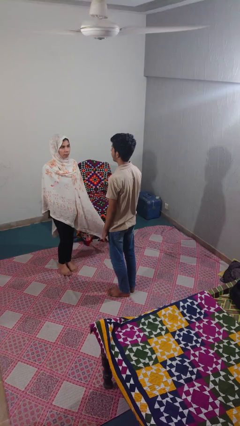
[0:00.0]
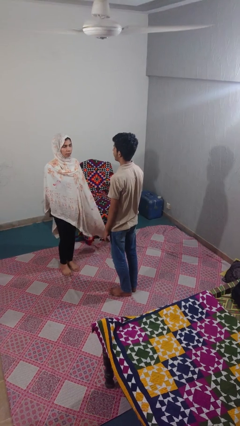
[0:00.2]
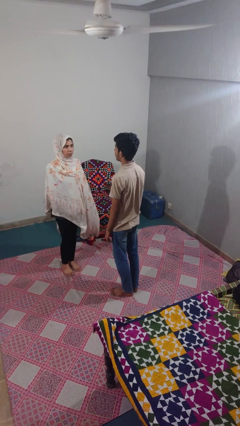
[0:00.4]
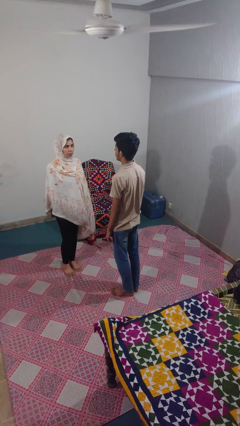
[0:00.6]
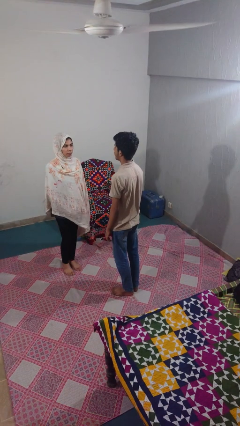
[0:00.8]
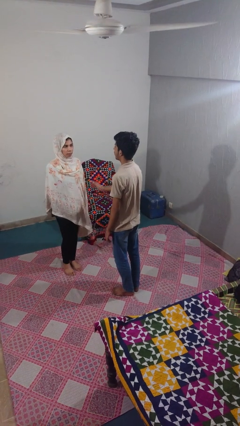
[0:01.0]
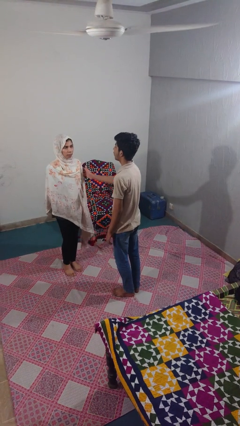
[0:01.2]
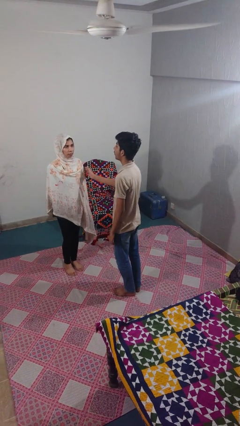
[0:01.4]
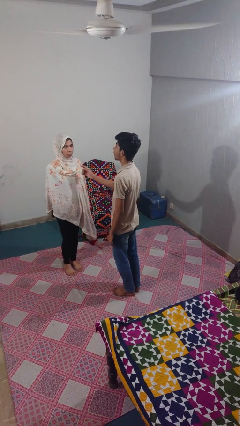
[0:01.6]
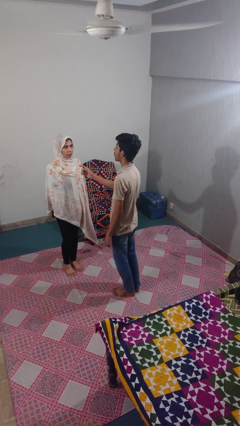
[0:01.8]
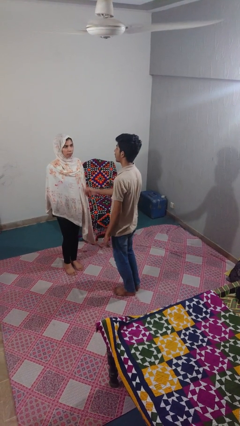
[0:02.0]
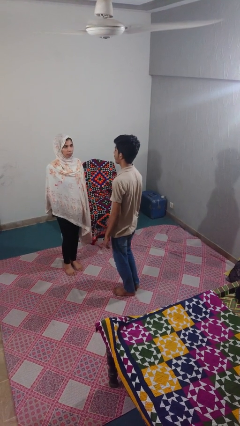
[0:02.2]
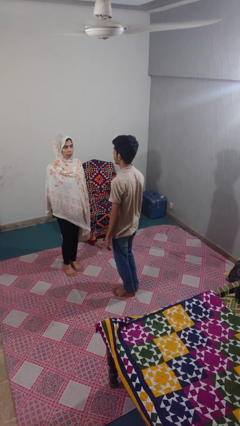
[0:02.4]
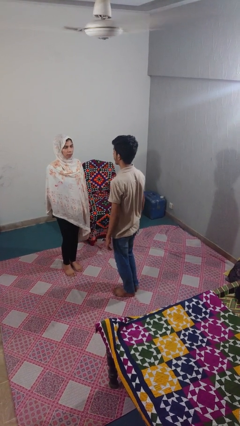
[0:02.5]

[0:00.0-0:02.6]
person shoves person

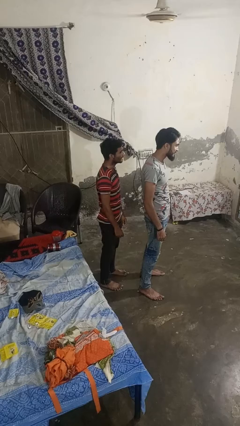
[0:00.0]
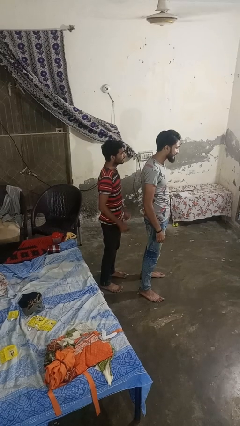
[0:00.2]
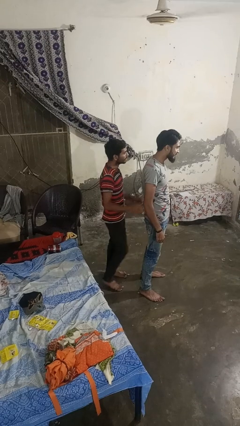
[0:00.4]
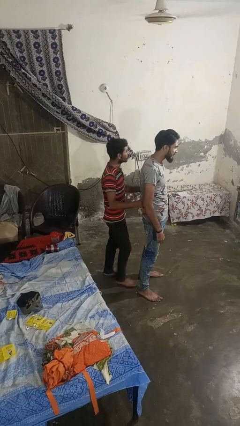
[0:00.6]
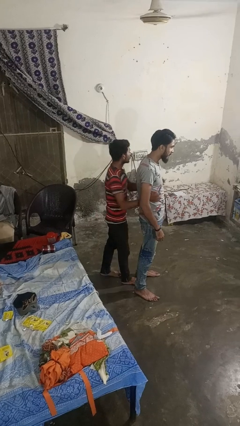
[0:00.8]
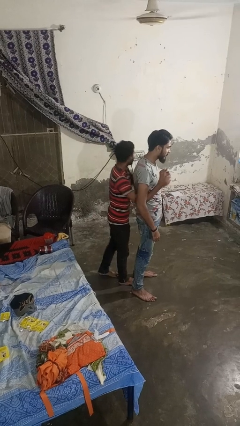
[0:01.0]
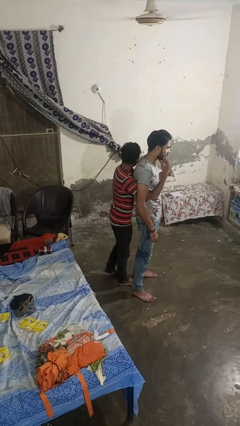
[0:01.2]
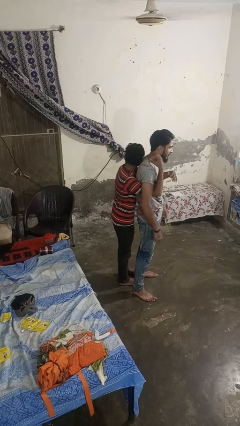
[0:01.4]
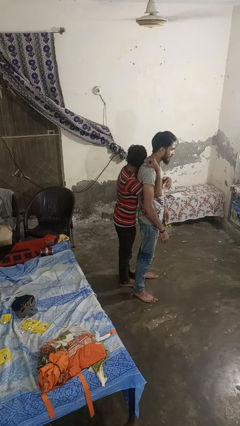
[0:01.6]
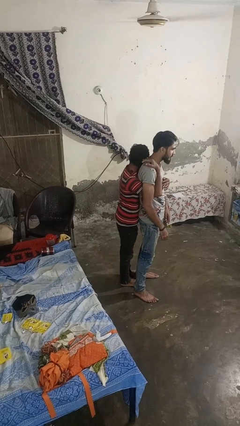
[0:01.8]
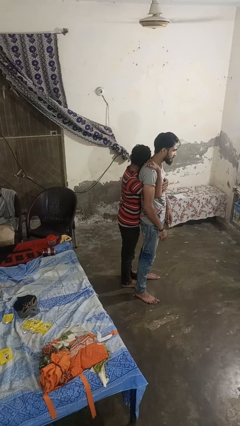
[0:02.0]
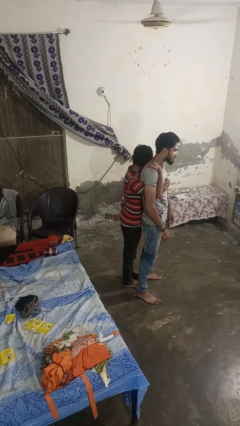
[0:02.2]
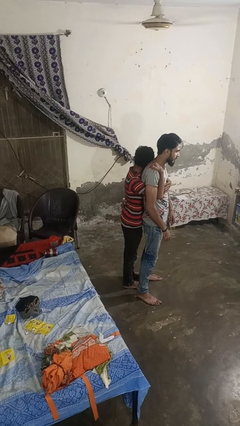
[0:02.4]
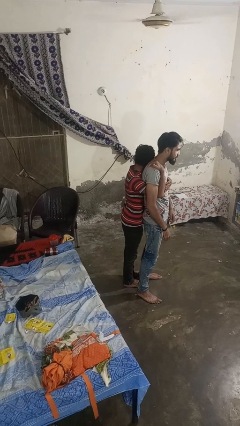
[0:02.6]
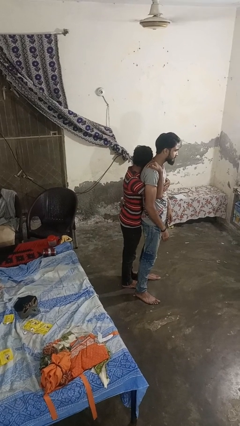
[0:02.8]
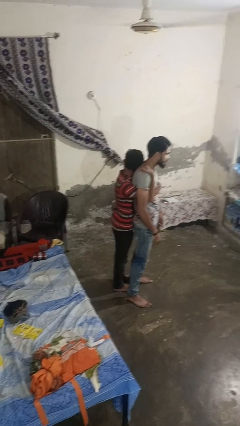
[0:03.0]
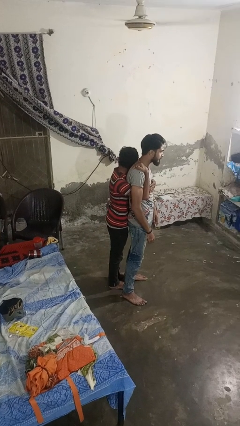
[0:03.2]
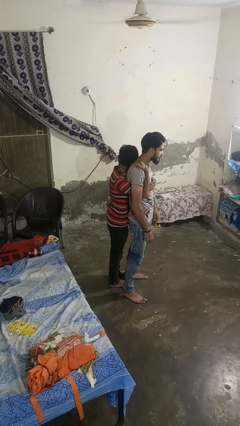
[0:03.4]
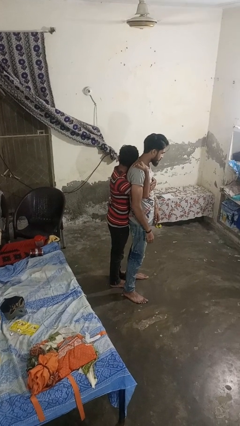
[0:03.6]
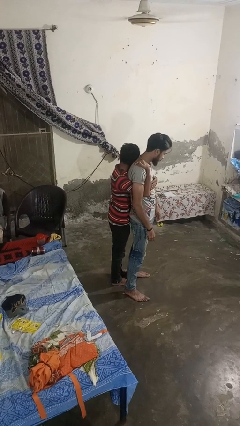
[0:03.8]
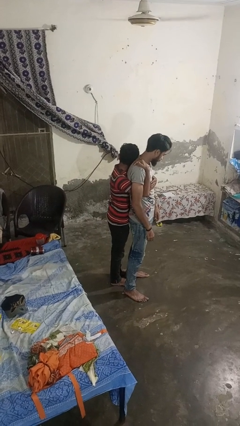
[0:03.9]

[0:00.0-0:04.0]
person hugs person from behind

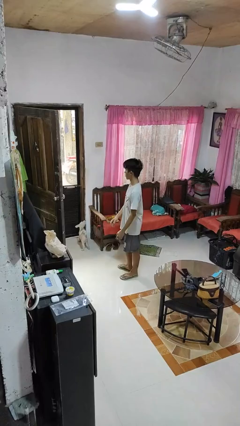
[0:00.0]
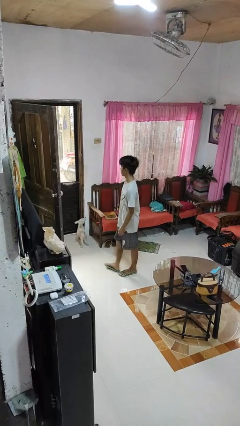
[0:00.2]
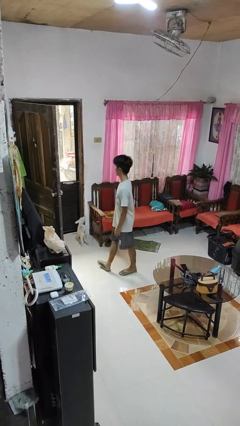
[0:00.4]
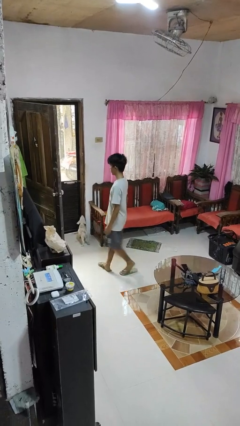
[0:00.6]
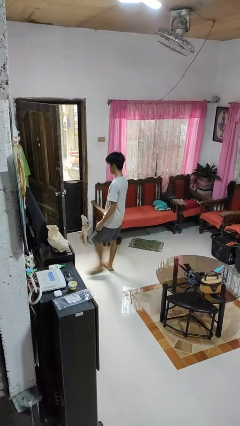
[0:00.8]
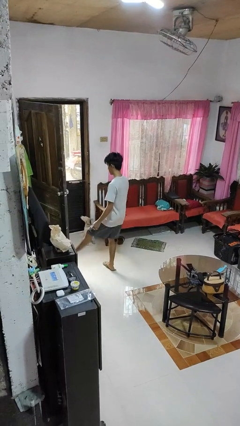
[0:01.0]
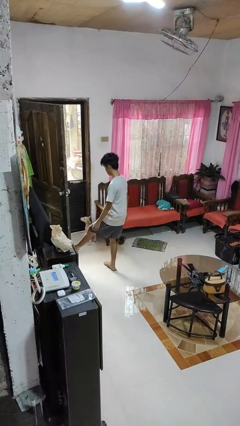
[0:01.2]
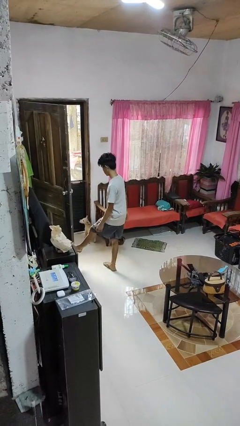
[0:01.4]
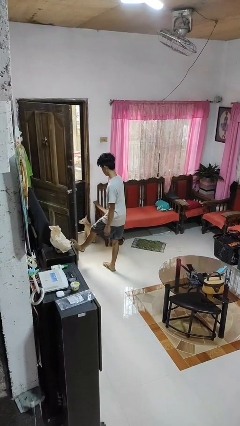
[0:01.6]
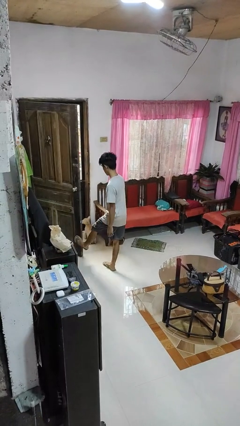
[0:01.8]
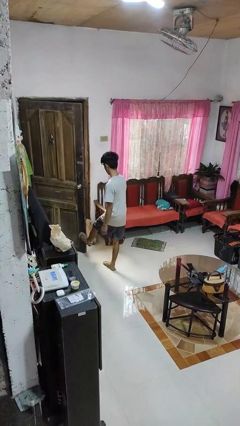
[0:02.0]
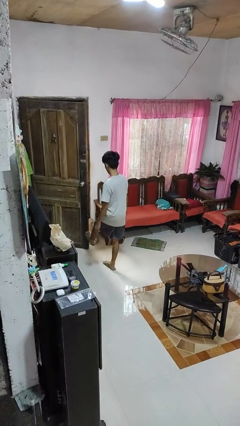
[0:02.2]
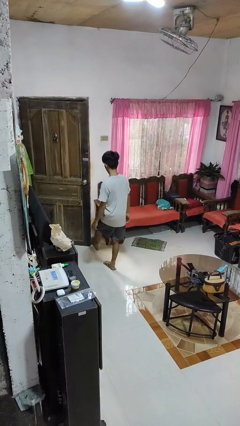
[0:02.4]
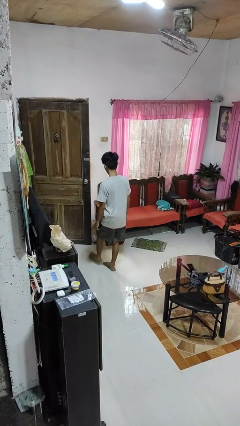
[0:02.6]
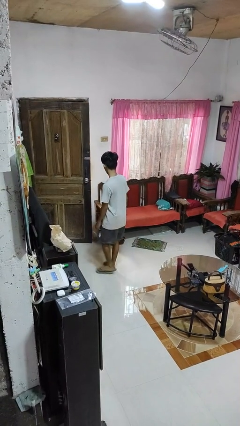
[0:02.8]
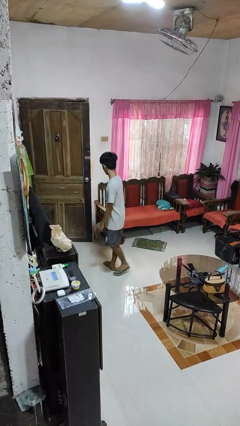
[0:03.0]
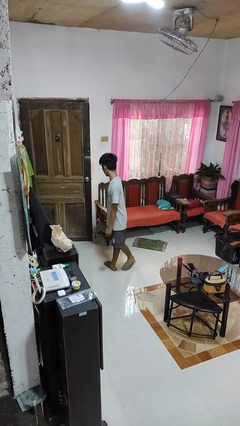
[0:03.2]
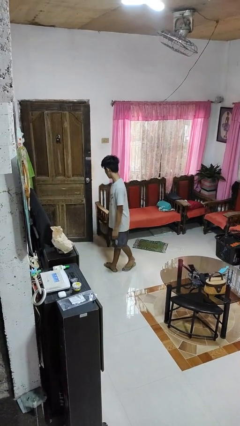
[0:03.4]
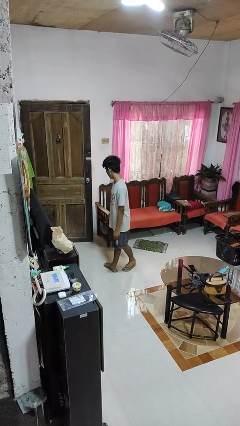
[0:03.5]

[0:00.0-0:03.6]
person closes door with foot

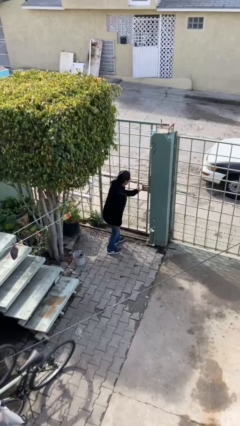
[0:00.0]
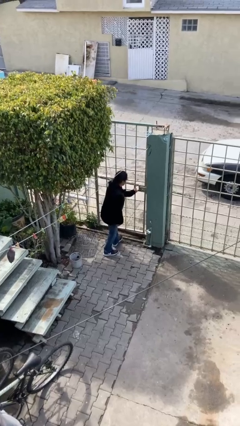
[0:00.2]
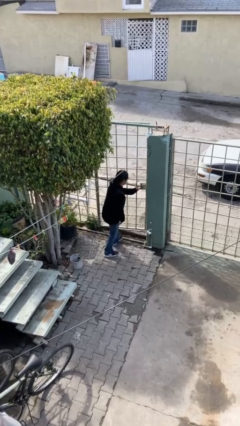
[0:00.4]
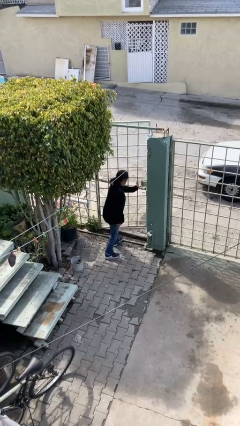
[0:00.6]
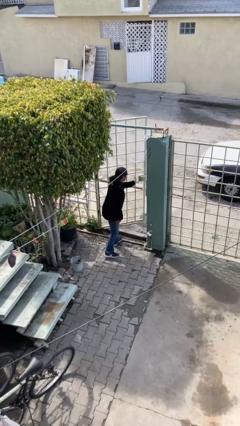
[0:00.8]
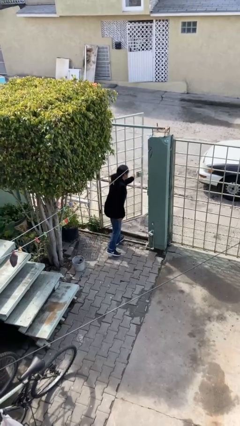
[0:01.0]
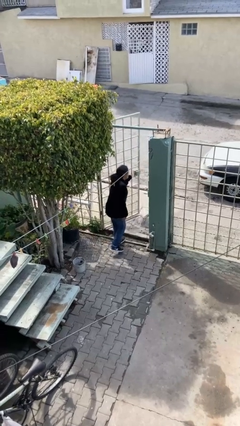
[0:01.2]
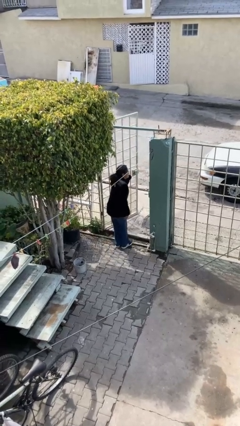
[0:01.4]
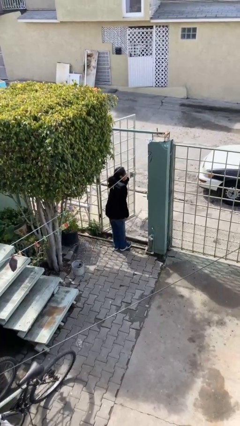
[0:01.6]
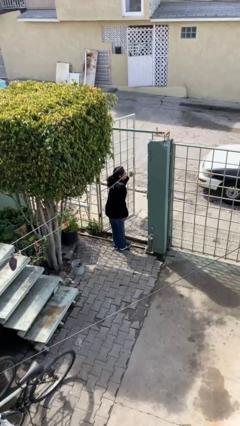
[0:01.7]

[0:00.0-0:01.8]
person opens facility door

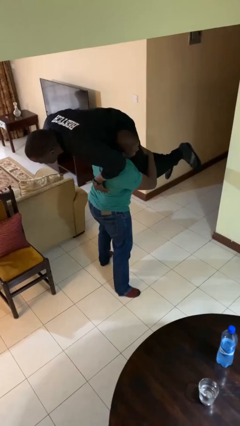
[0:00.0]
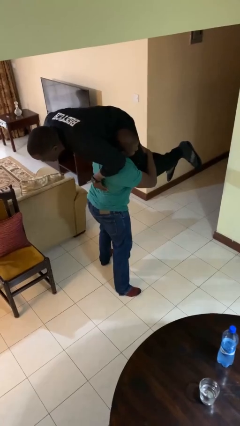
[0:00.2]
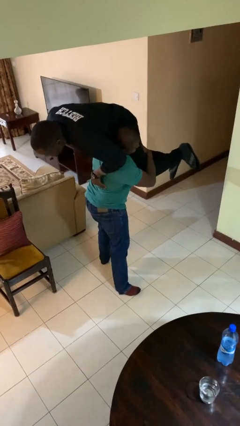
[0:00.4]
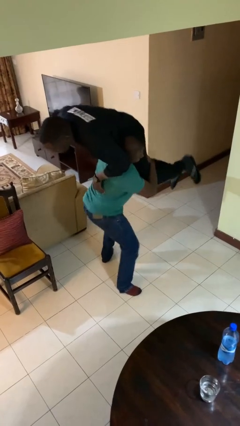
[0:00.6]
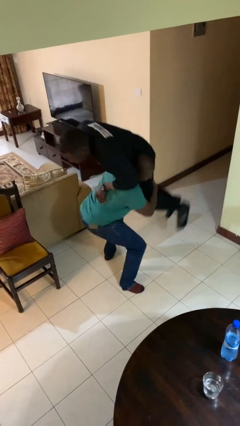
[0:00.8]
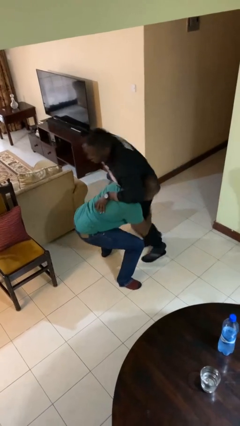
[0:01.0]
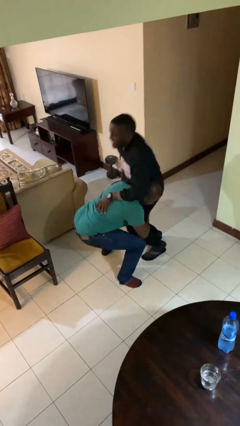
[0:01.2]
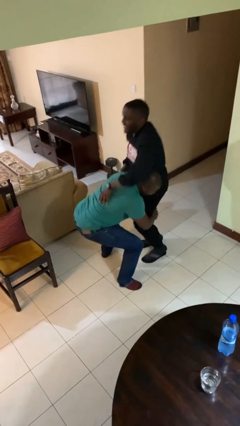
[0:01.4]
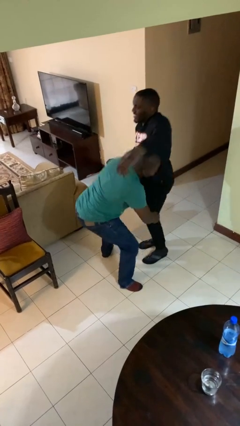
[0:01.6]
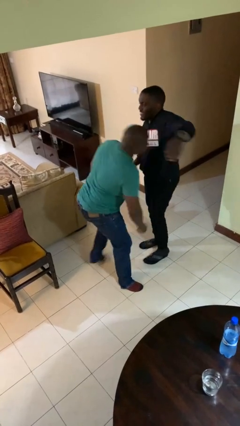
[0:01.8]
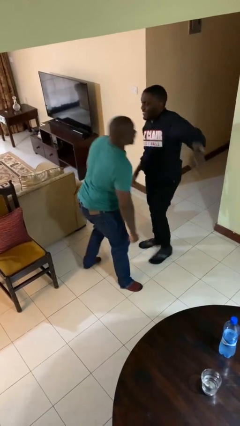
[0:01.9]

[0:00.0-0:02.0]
person puts down person

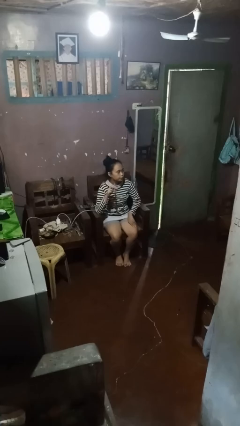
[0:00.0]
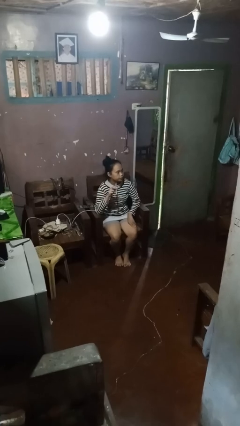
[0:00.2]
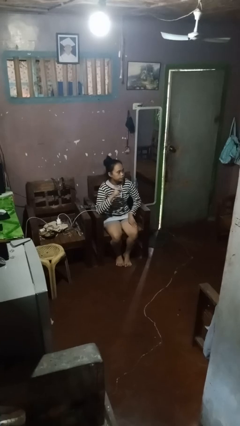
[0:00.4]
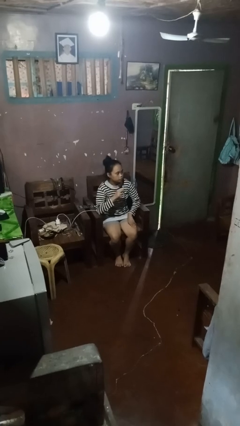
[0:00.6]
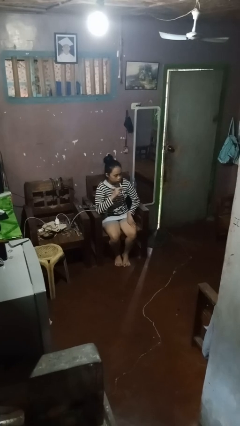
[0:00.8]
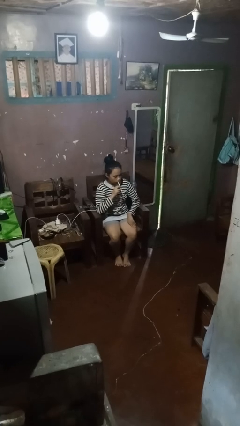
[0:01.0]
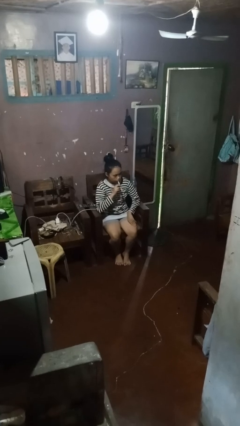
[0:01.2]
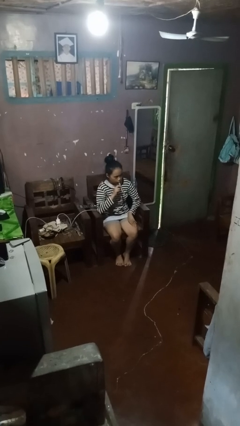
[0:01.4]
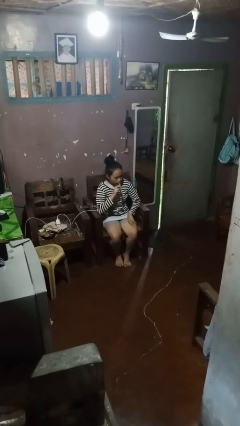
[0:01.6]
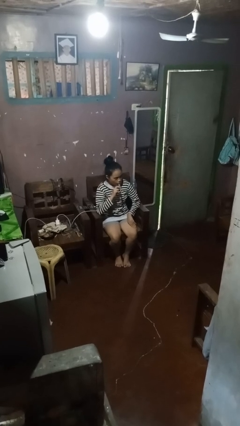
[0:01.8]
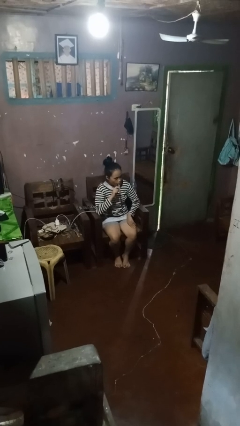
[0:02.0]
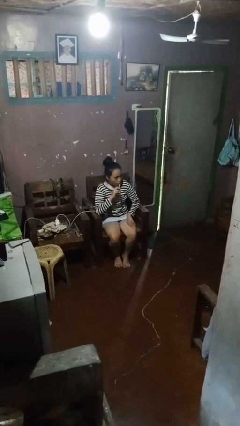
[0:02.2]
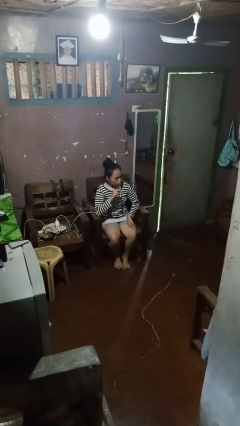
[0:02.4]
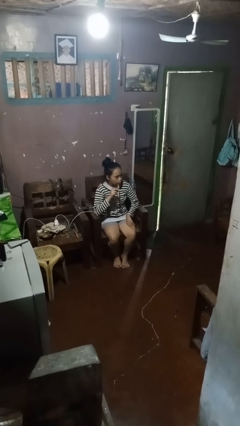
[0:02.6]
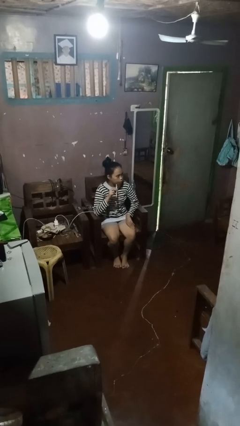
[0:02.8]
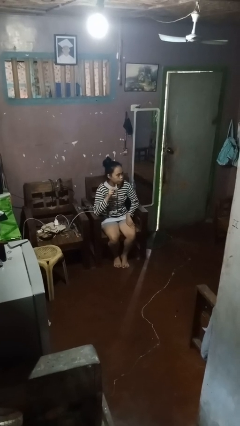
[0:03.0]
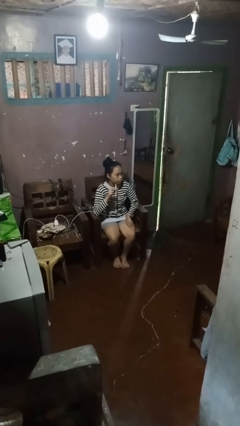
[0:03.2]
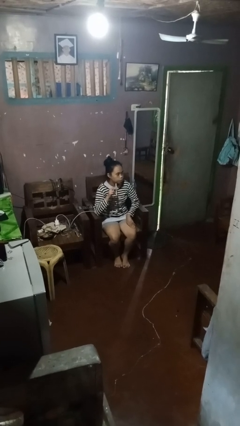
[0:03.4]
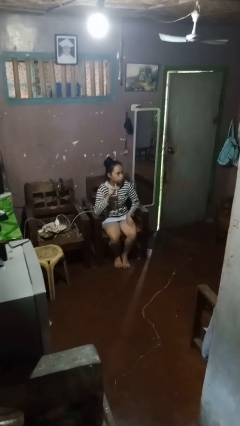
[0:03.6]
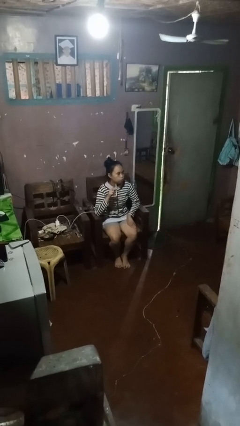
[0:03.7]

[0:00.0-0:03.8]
person vapes
